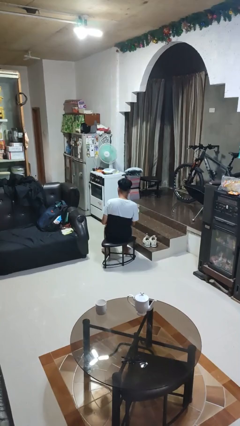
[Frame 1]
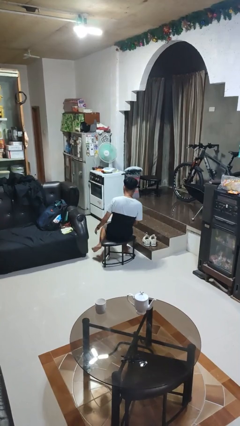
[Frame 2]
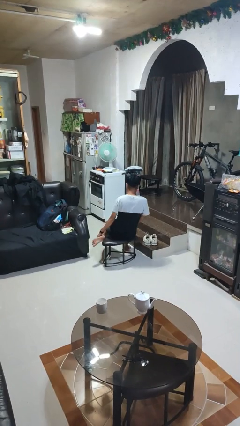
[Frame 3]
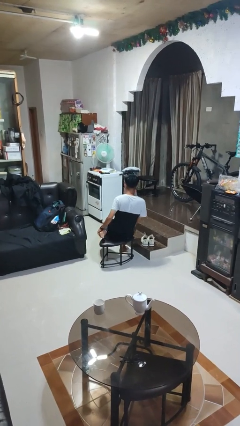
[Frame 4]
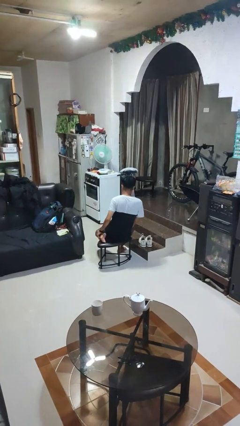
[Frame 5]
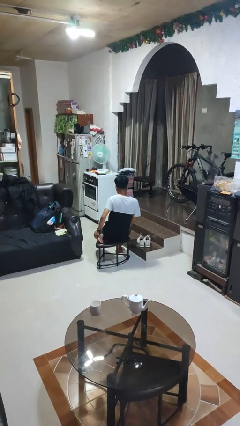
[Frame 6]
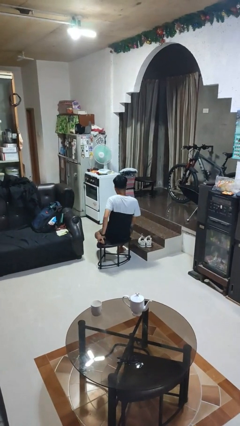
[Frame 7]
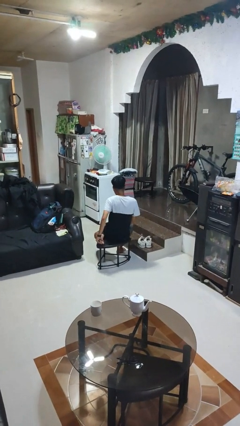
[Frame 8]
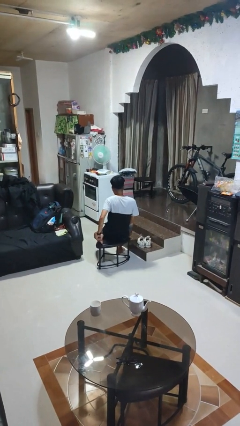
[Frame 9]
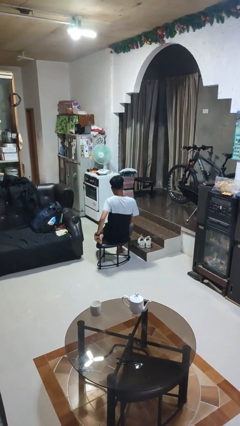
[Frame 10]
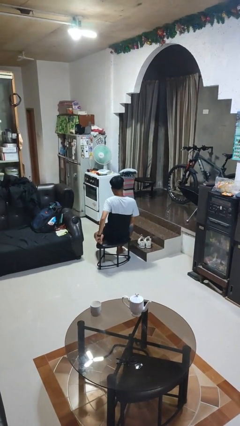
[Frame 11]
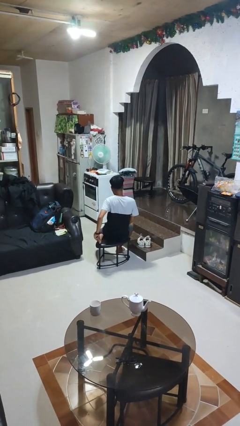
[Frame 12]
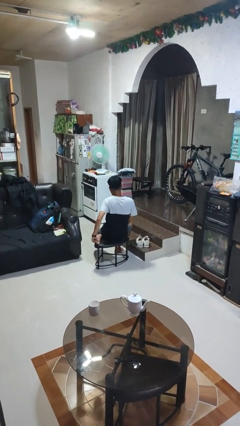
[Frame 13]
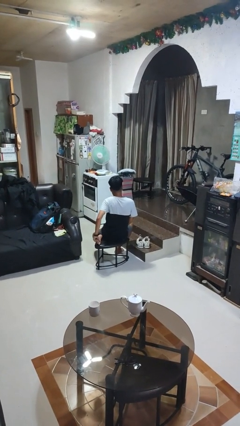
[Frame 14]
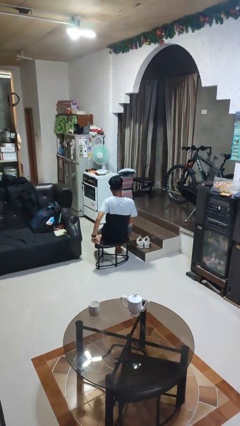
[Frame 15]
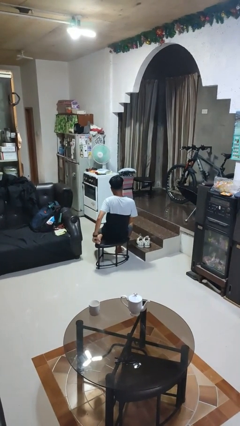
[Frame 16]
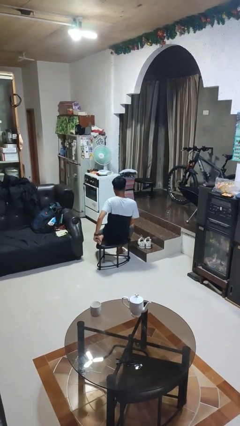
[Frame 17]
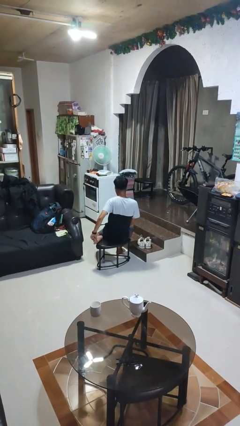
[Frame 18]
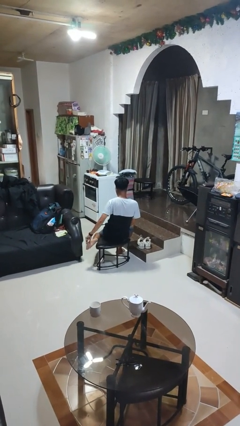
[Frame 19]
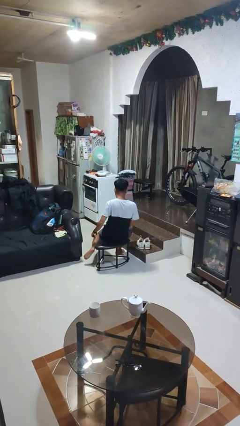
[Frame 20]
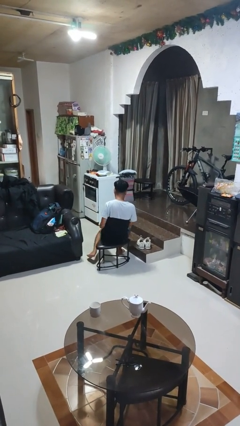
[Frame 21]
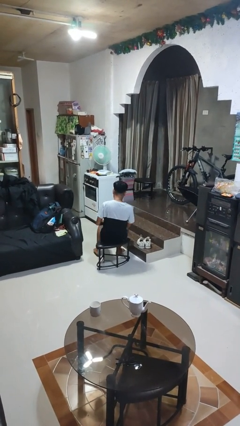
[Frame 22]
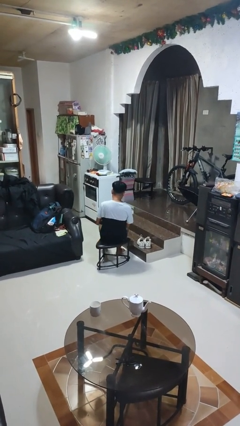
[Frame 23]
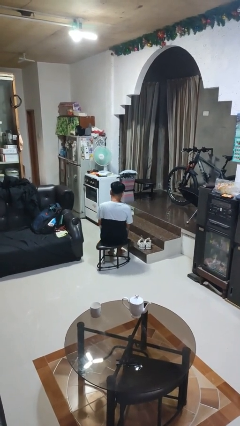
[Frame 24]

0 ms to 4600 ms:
person rubs foot

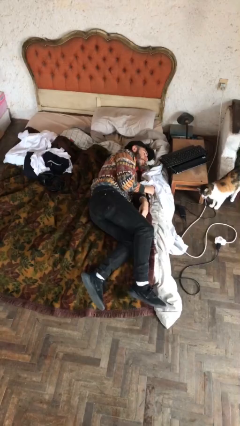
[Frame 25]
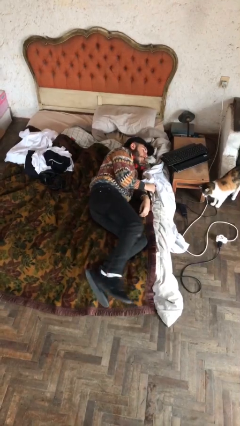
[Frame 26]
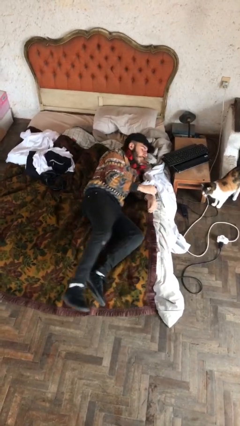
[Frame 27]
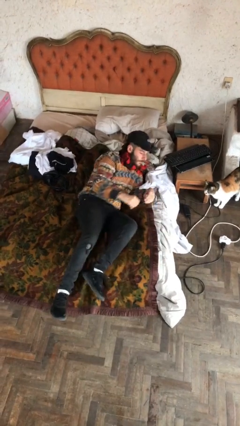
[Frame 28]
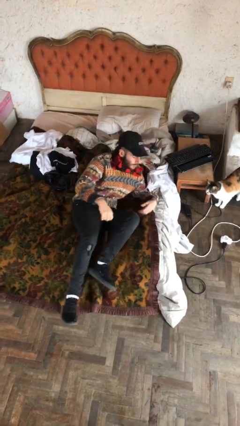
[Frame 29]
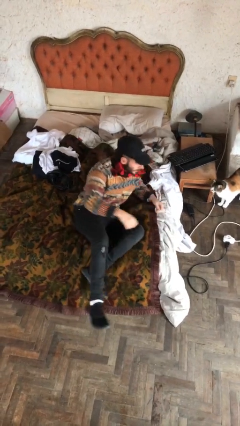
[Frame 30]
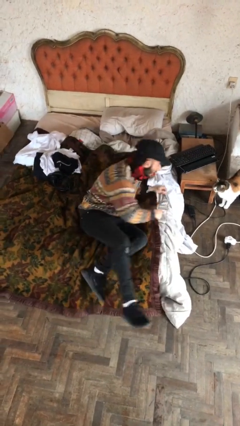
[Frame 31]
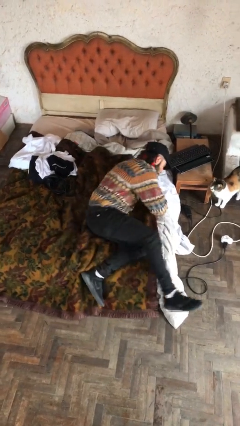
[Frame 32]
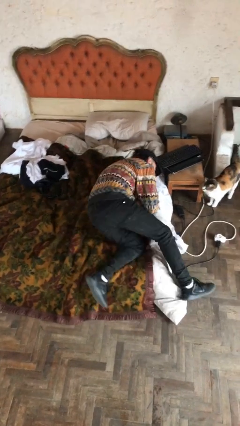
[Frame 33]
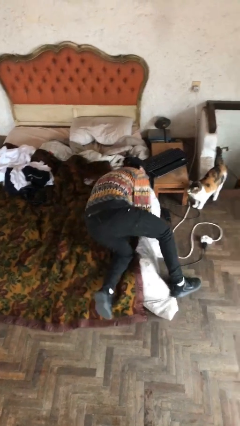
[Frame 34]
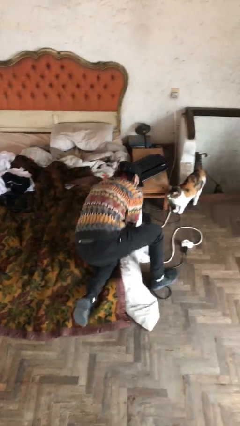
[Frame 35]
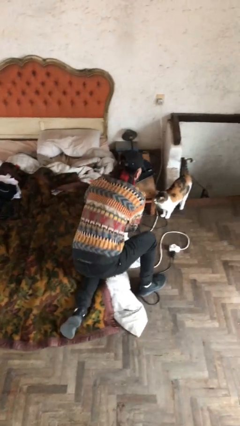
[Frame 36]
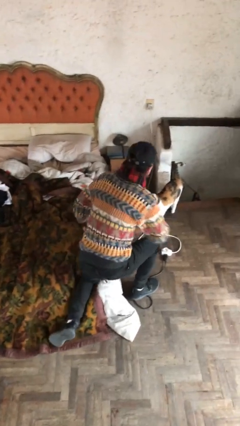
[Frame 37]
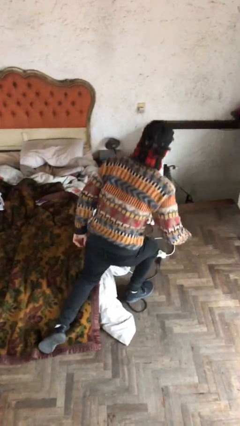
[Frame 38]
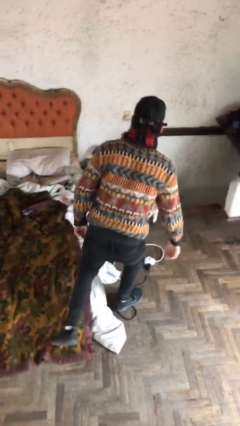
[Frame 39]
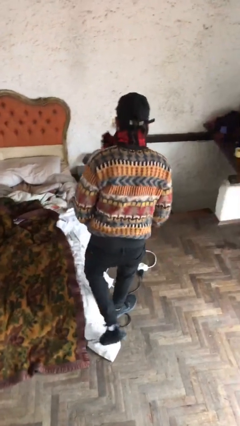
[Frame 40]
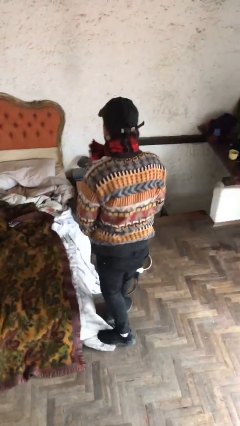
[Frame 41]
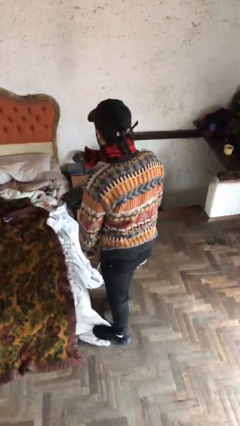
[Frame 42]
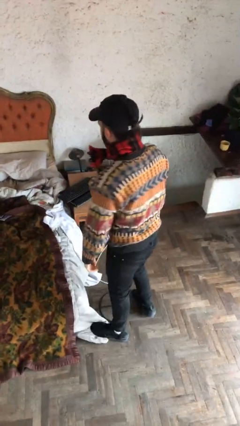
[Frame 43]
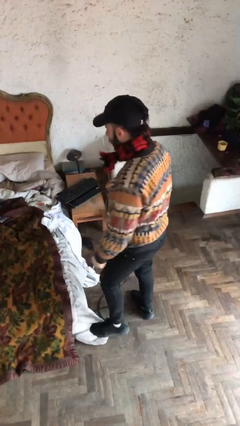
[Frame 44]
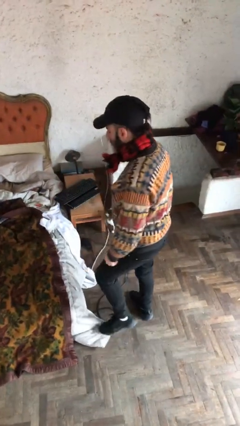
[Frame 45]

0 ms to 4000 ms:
person stands up

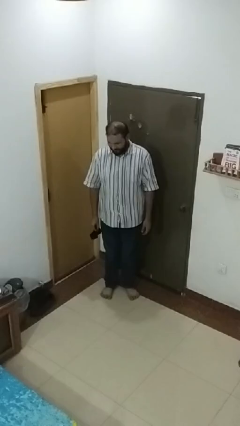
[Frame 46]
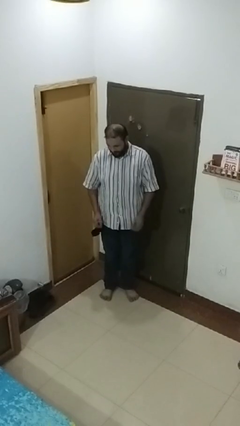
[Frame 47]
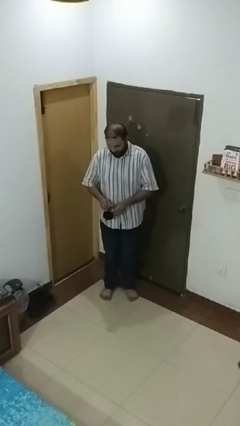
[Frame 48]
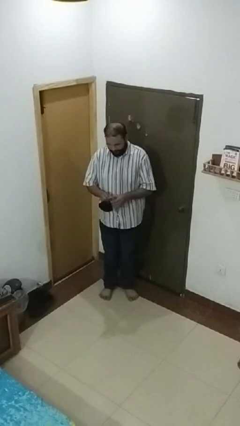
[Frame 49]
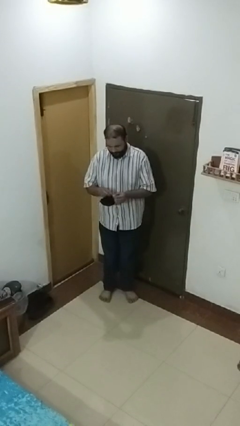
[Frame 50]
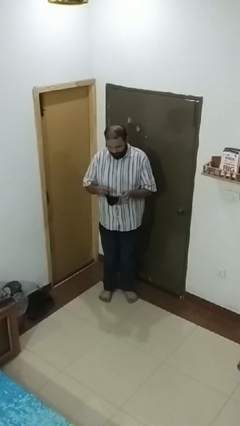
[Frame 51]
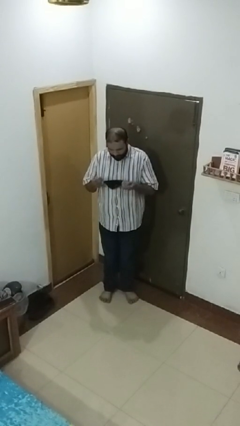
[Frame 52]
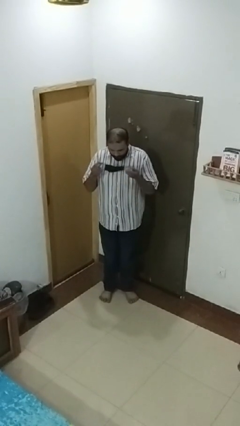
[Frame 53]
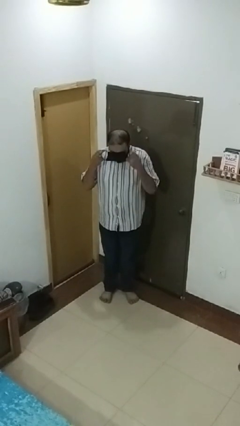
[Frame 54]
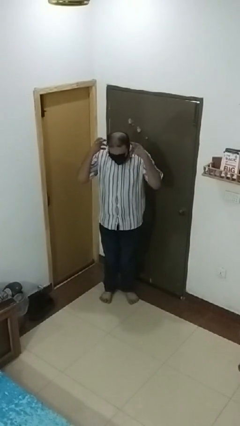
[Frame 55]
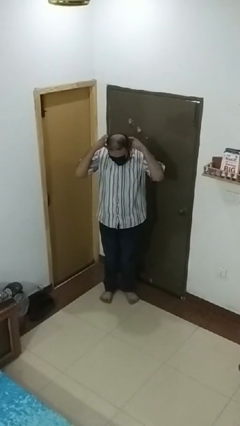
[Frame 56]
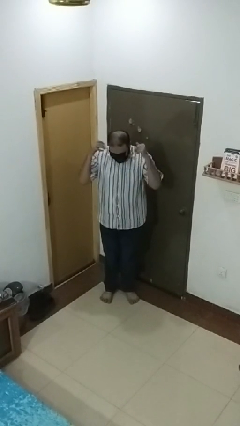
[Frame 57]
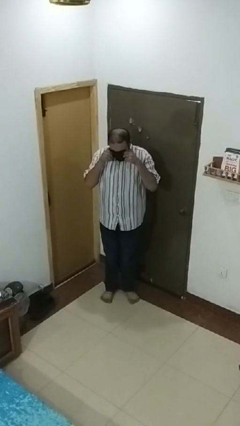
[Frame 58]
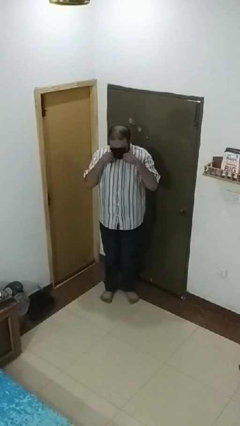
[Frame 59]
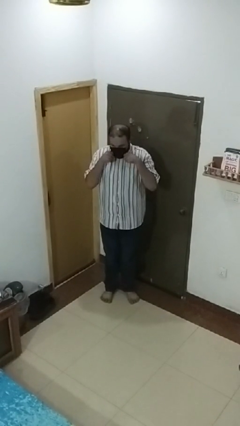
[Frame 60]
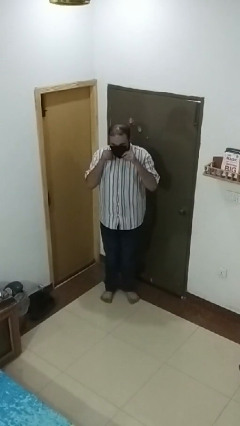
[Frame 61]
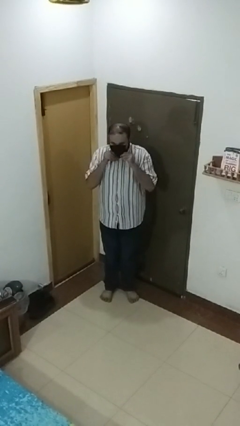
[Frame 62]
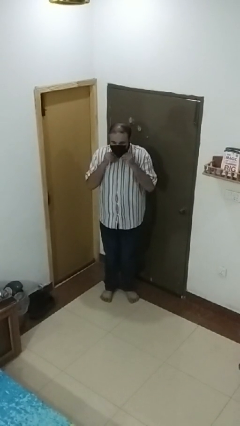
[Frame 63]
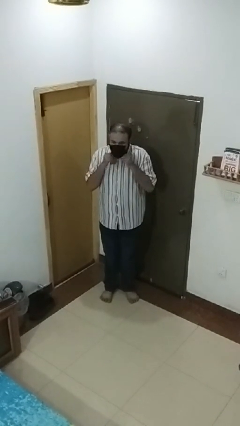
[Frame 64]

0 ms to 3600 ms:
person puts on facemask

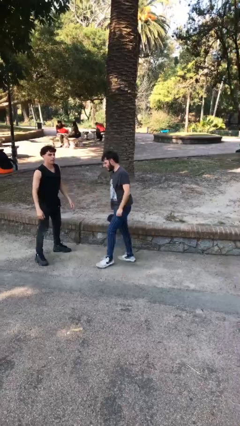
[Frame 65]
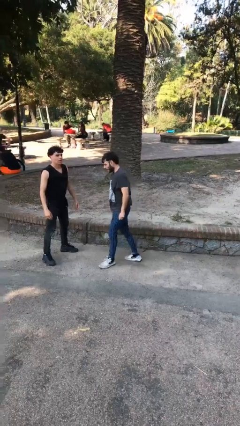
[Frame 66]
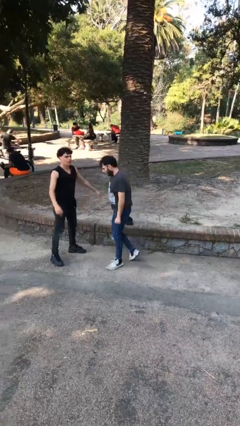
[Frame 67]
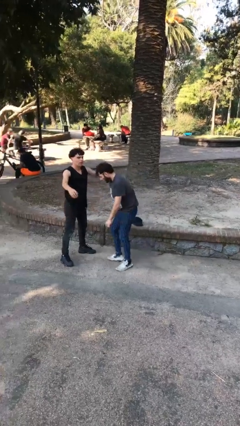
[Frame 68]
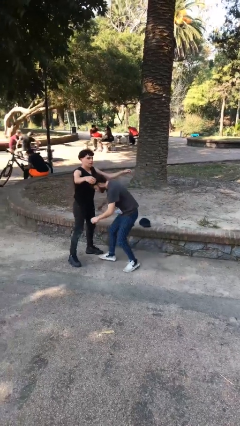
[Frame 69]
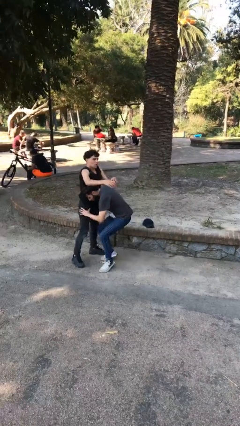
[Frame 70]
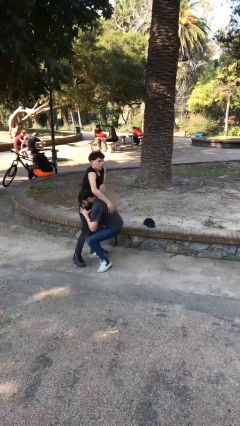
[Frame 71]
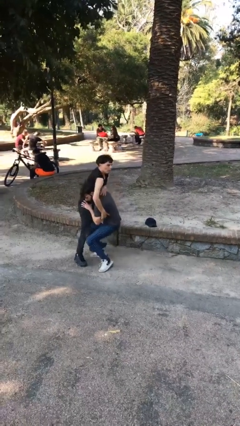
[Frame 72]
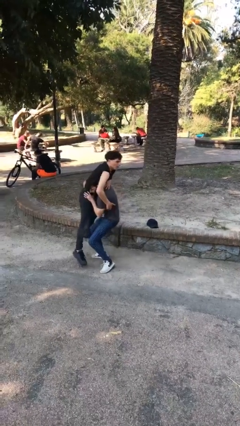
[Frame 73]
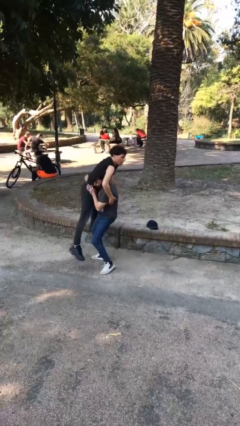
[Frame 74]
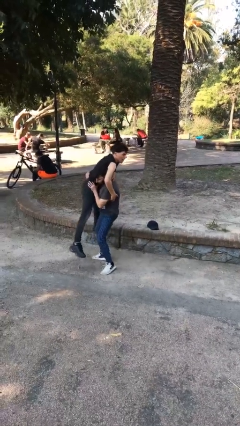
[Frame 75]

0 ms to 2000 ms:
person picks up person

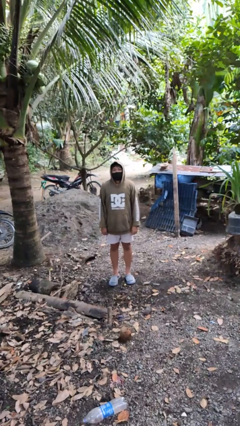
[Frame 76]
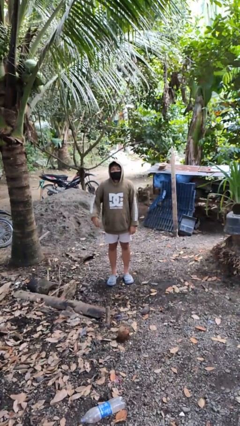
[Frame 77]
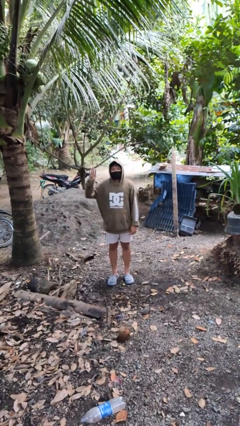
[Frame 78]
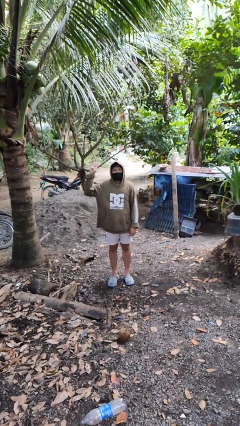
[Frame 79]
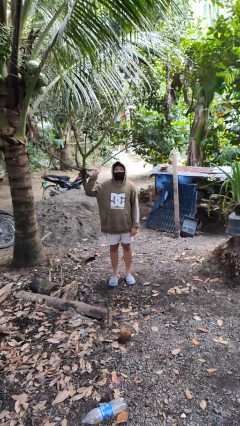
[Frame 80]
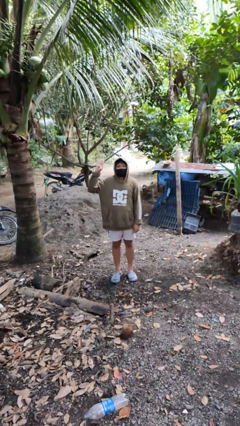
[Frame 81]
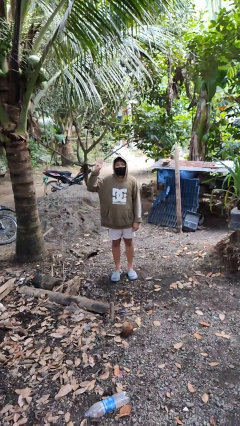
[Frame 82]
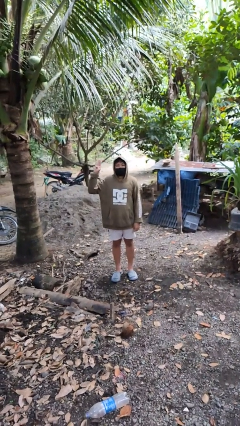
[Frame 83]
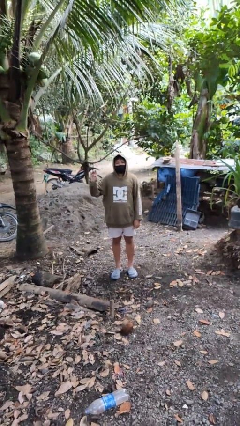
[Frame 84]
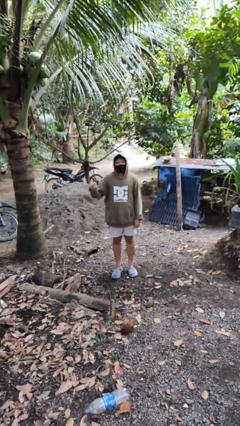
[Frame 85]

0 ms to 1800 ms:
person gestures number four

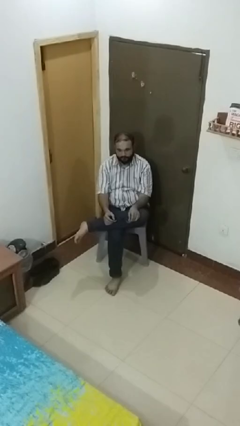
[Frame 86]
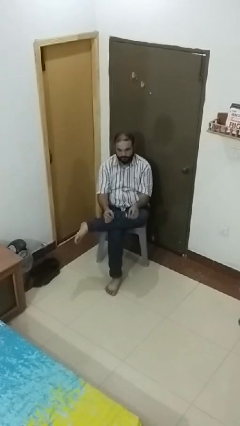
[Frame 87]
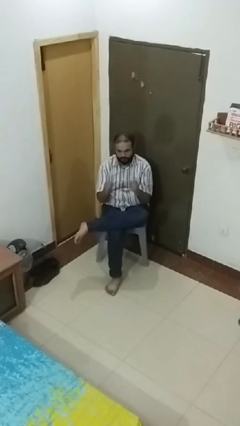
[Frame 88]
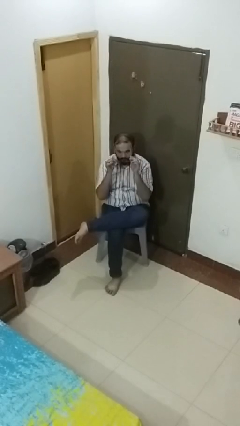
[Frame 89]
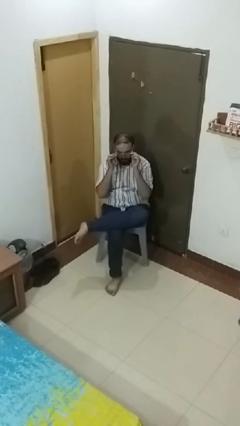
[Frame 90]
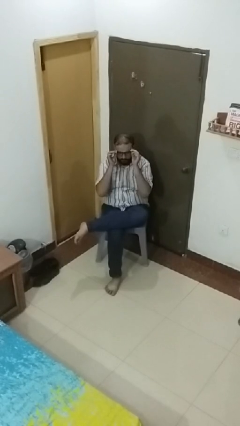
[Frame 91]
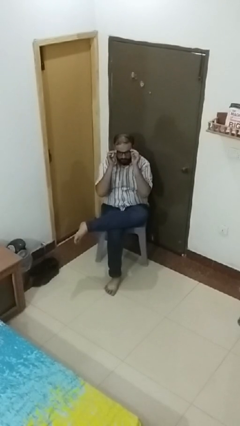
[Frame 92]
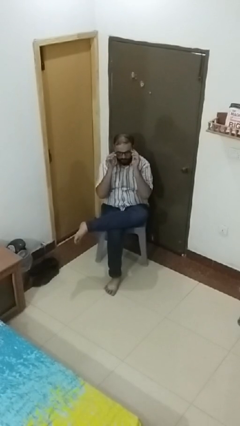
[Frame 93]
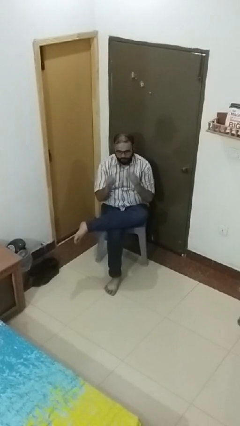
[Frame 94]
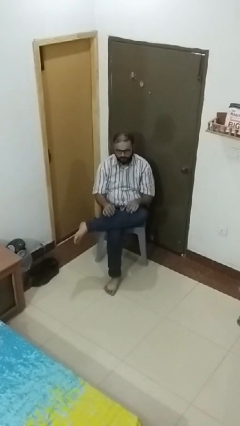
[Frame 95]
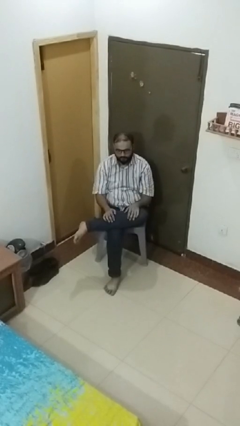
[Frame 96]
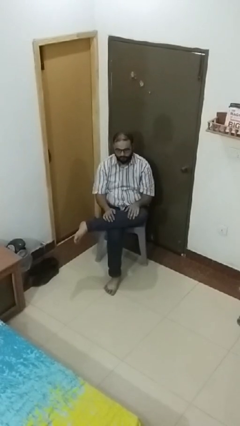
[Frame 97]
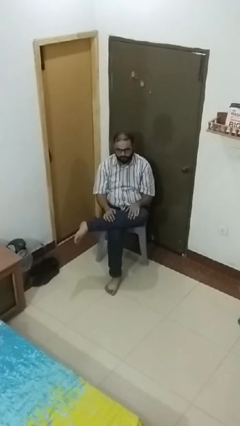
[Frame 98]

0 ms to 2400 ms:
person puts on glasses
